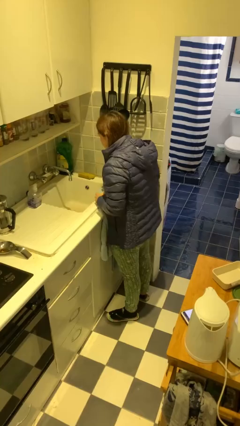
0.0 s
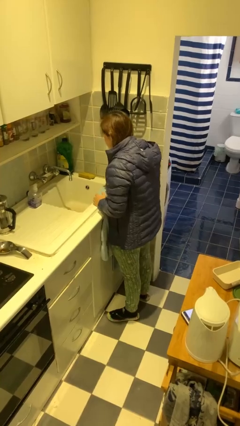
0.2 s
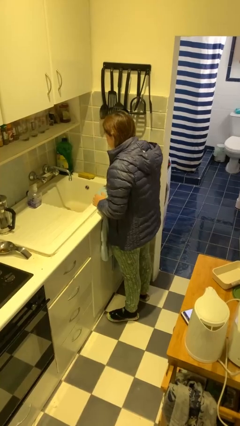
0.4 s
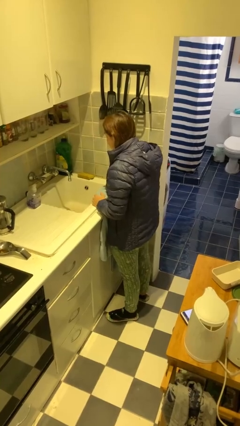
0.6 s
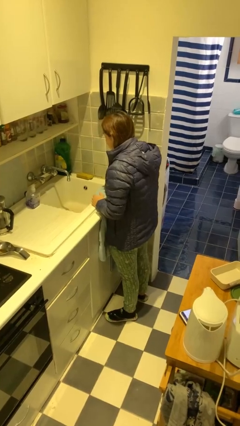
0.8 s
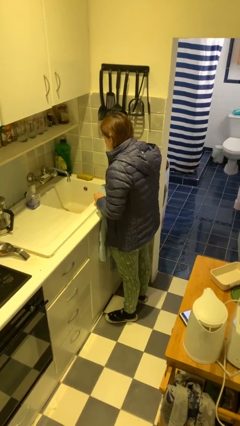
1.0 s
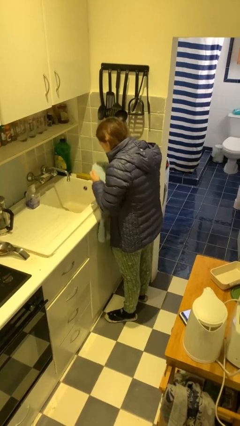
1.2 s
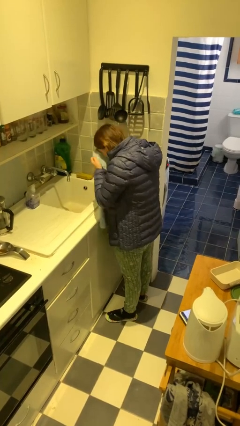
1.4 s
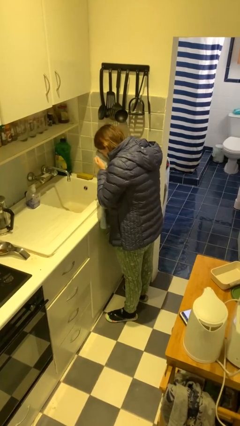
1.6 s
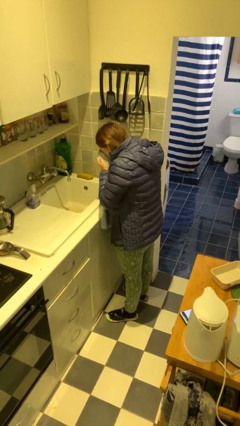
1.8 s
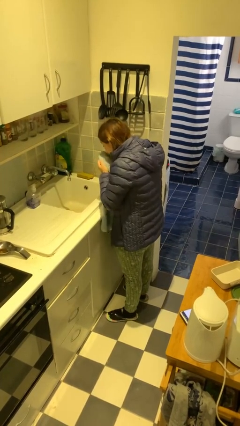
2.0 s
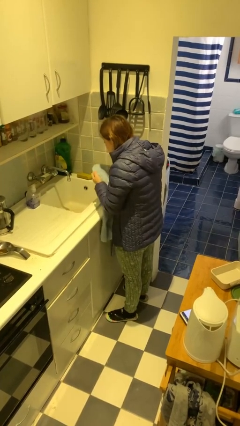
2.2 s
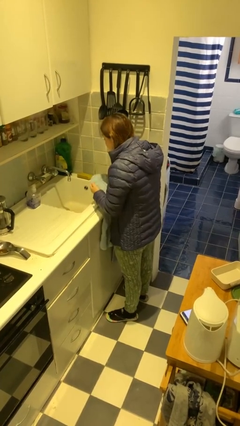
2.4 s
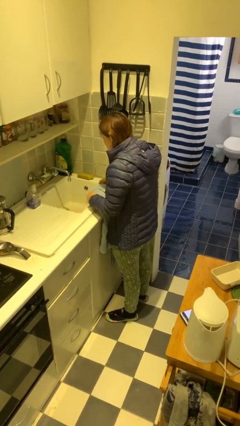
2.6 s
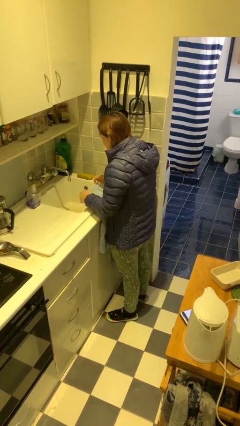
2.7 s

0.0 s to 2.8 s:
person dries face with towel

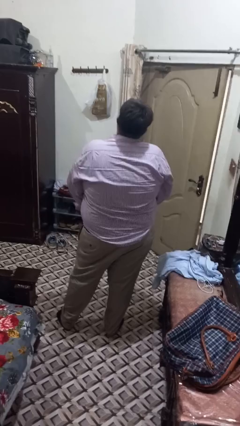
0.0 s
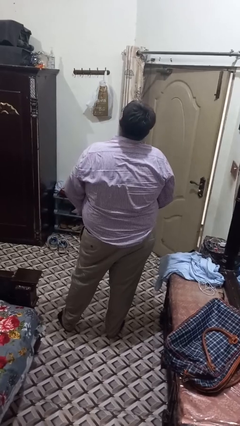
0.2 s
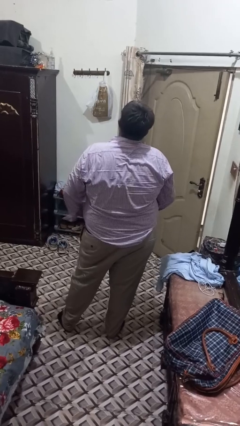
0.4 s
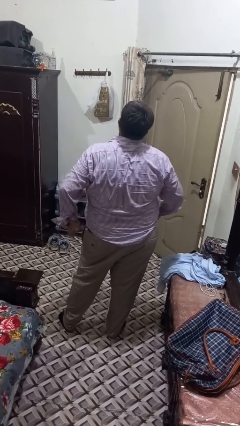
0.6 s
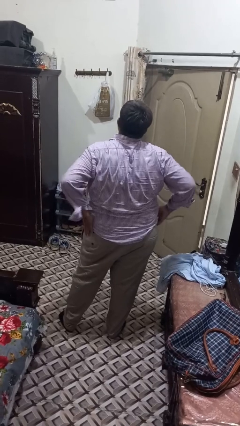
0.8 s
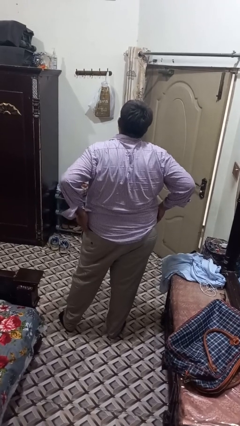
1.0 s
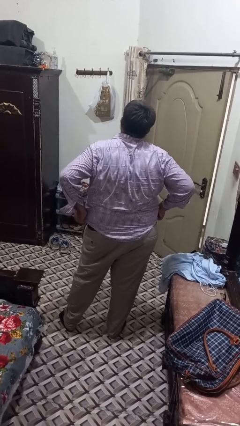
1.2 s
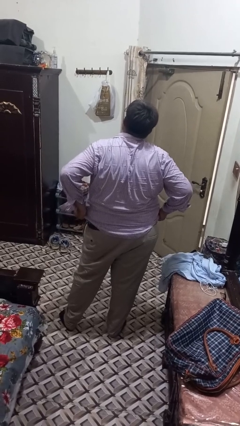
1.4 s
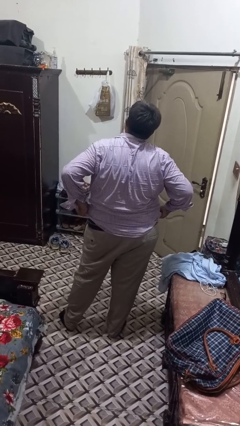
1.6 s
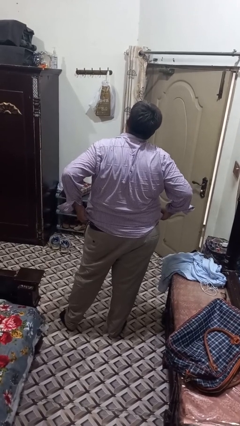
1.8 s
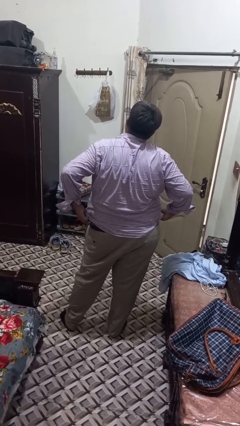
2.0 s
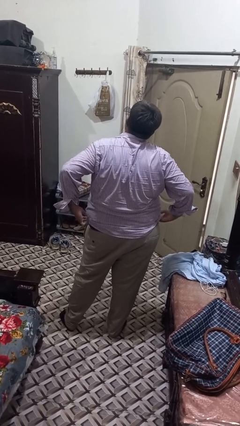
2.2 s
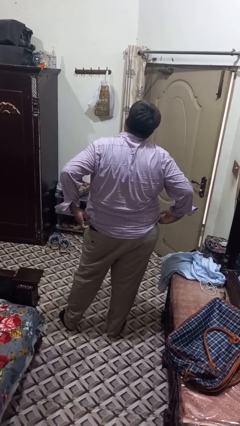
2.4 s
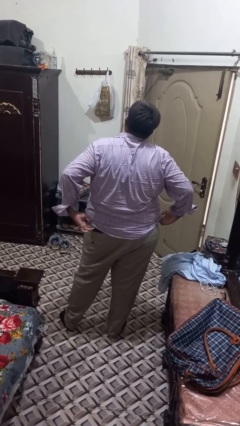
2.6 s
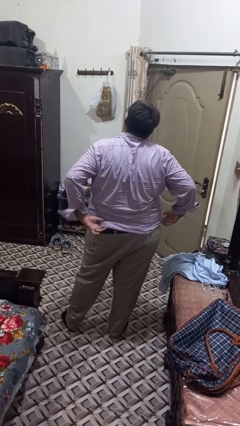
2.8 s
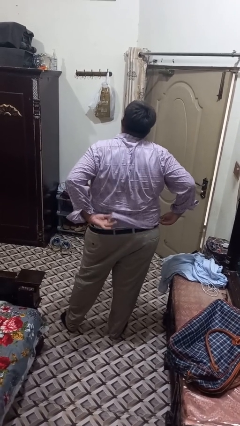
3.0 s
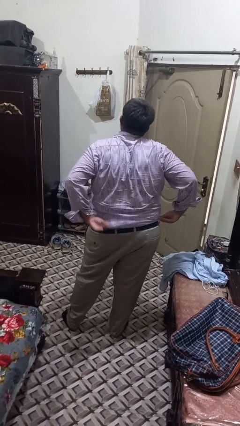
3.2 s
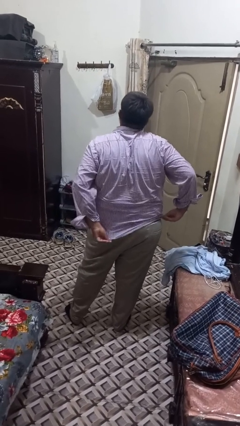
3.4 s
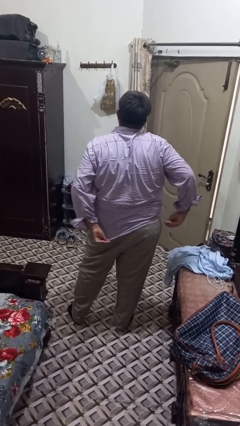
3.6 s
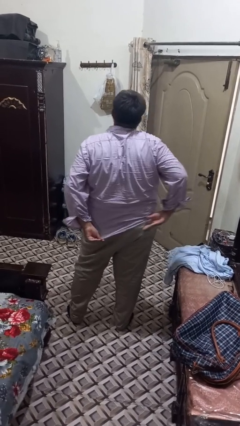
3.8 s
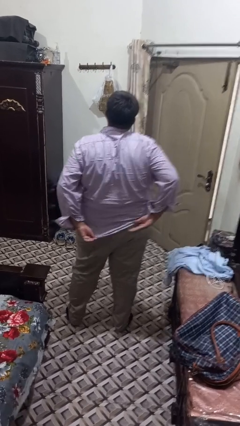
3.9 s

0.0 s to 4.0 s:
person untucks shirt

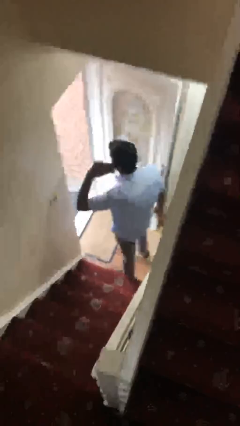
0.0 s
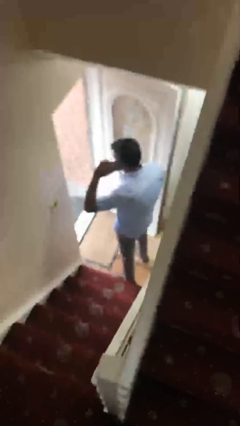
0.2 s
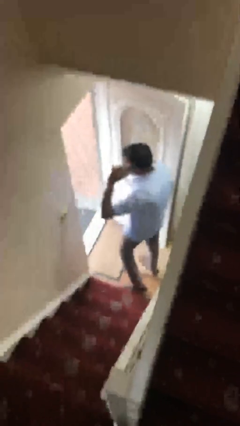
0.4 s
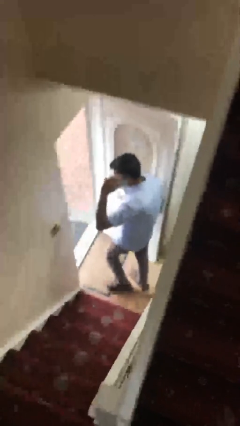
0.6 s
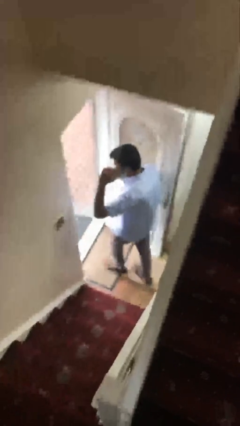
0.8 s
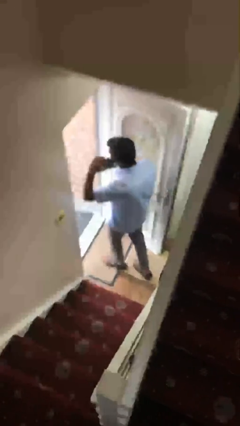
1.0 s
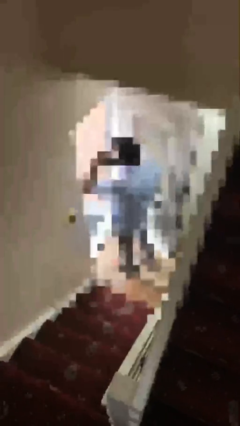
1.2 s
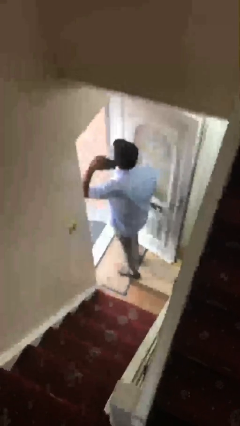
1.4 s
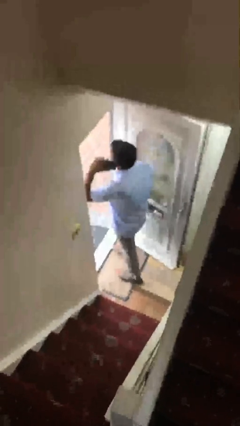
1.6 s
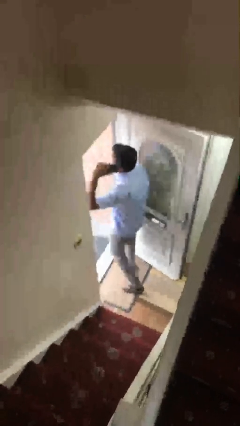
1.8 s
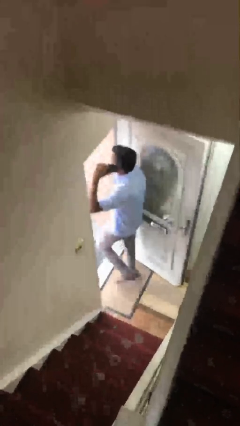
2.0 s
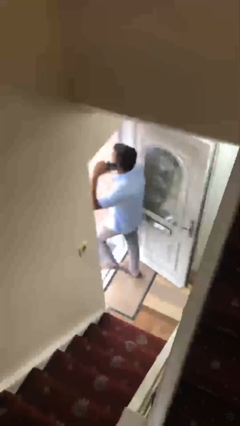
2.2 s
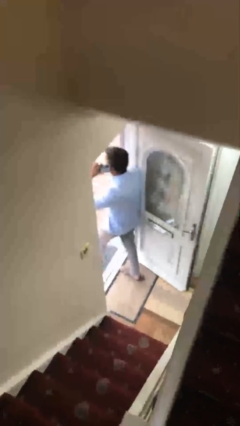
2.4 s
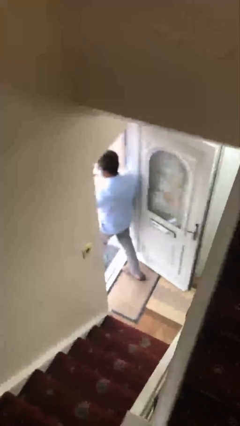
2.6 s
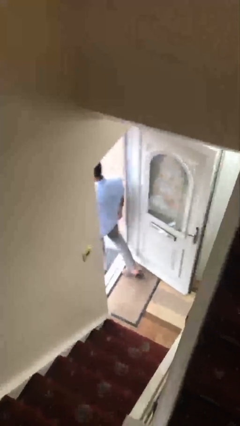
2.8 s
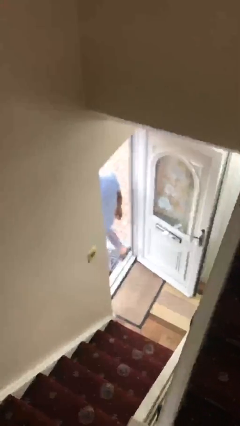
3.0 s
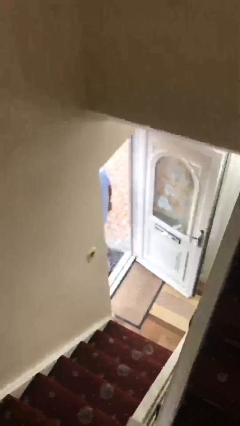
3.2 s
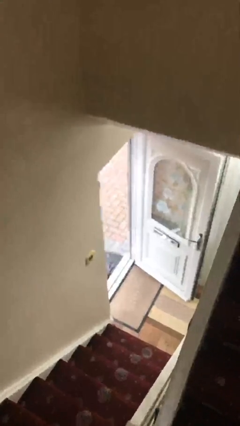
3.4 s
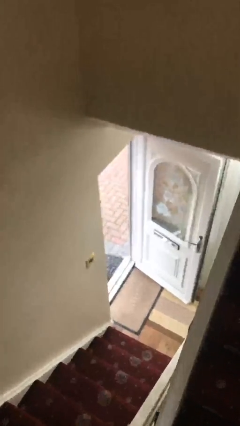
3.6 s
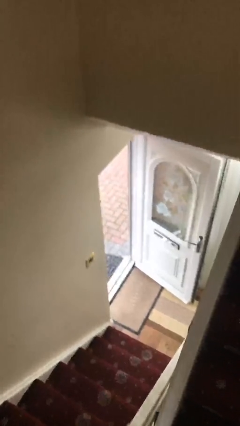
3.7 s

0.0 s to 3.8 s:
person exits scene through structure

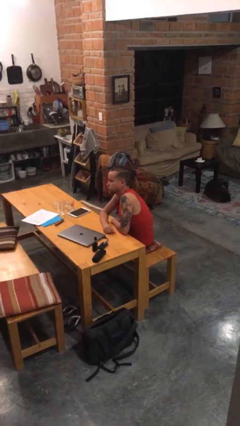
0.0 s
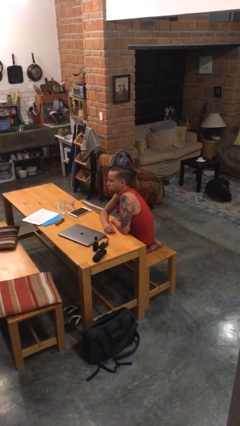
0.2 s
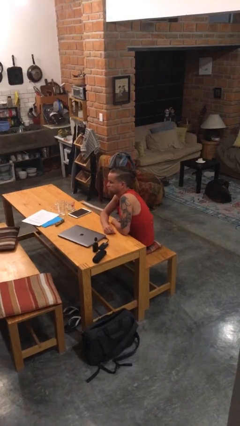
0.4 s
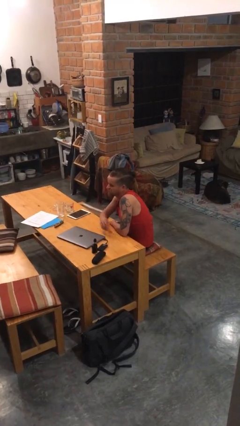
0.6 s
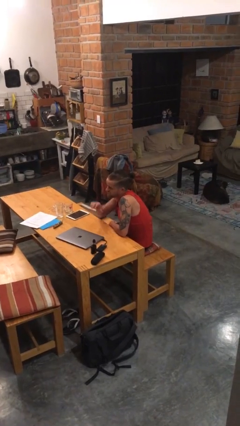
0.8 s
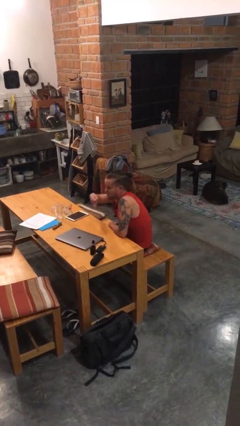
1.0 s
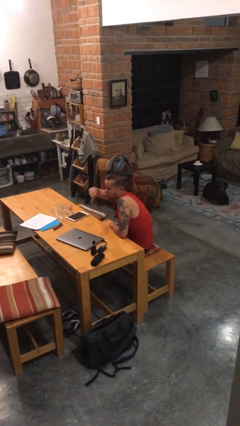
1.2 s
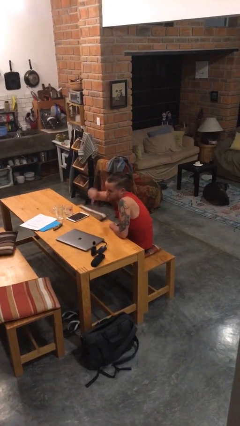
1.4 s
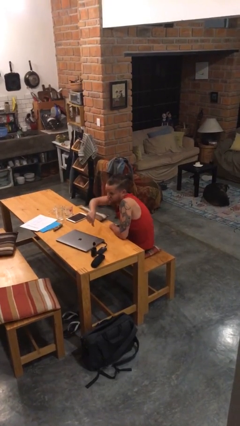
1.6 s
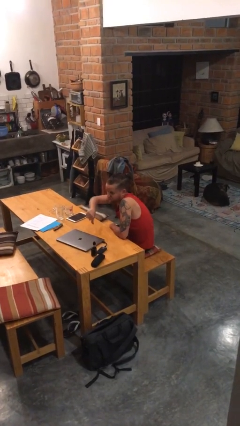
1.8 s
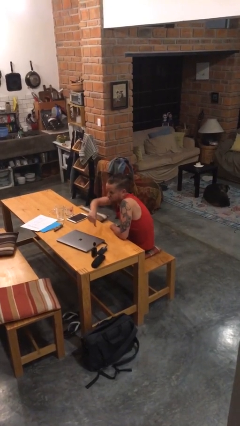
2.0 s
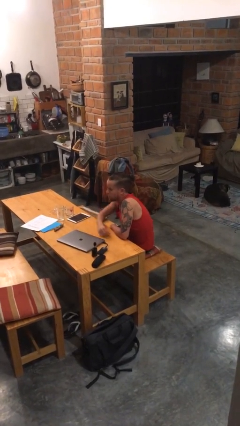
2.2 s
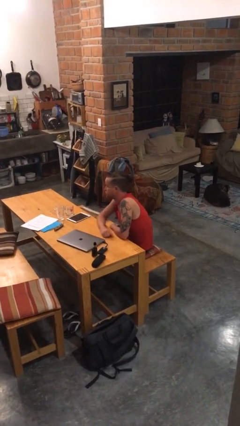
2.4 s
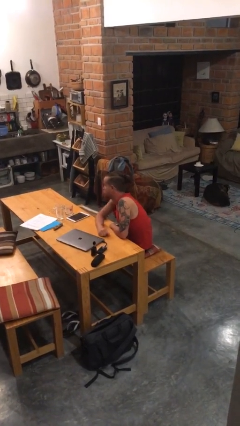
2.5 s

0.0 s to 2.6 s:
person gestures thumbs down

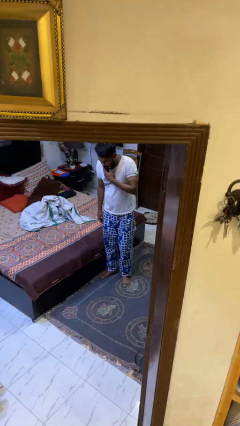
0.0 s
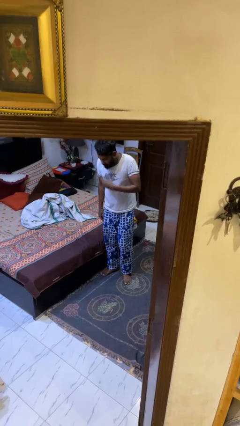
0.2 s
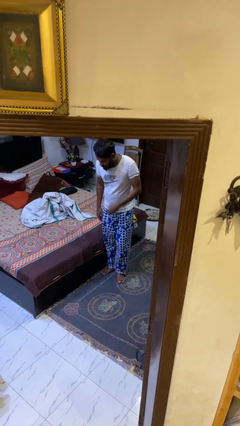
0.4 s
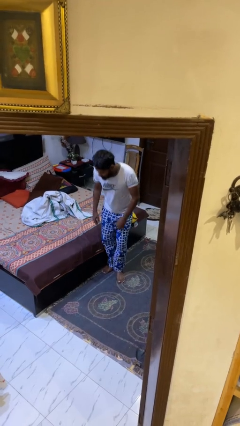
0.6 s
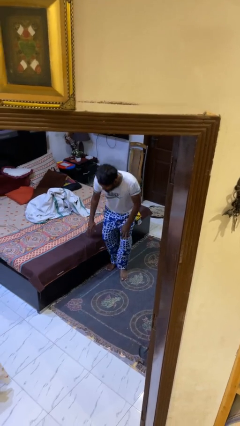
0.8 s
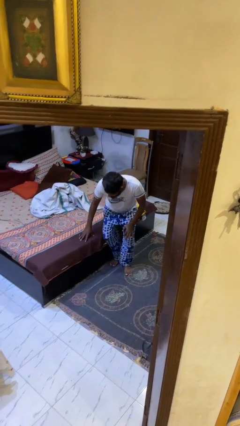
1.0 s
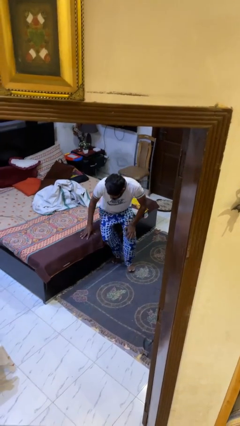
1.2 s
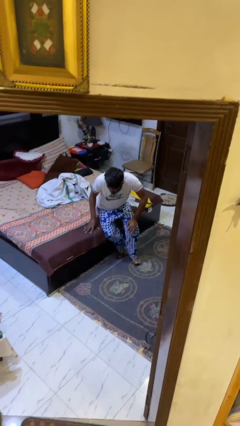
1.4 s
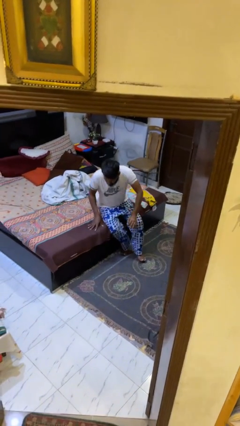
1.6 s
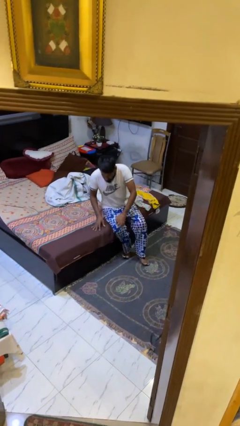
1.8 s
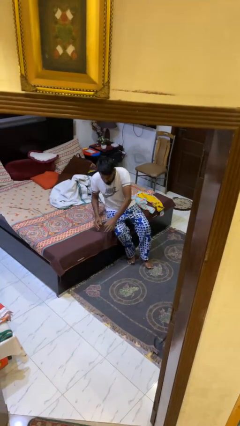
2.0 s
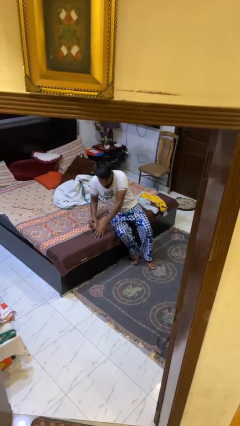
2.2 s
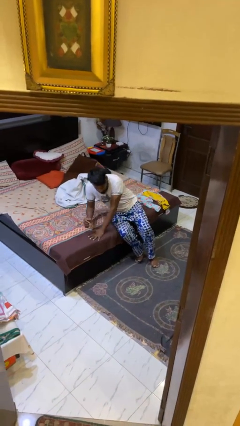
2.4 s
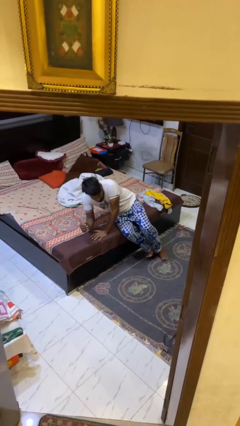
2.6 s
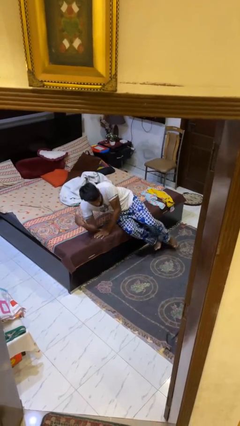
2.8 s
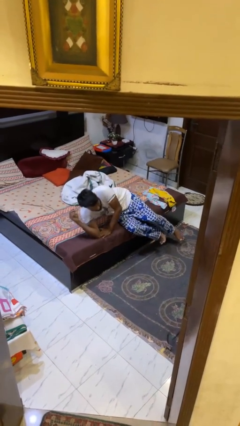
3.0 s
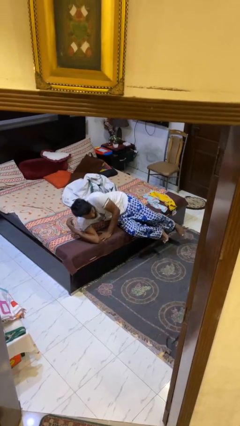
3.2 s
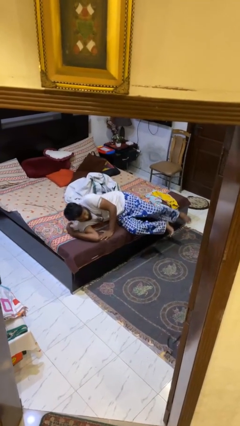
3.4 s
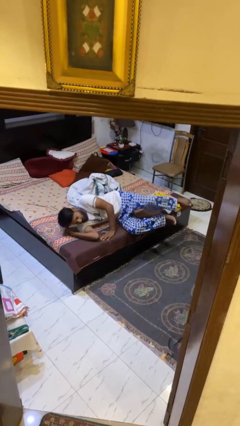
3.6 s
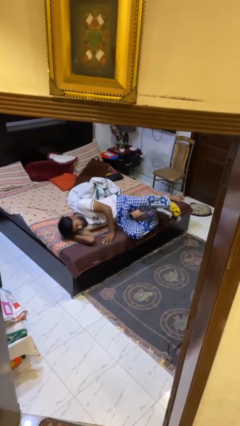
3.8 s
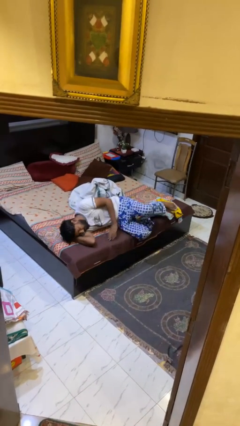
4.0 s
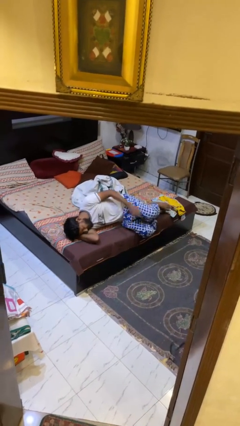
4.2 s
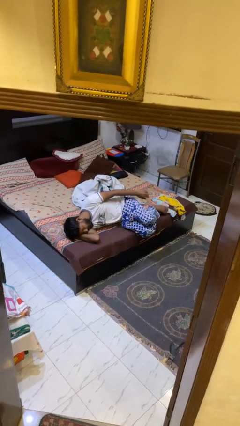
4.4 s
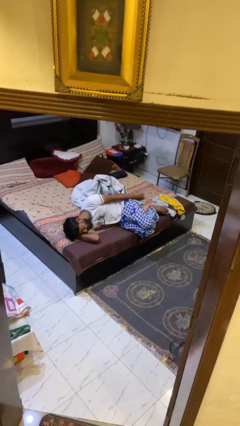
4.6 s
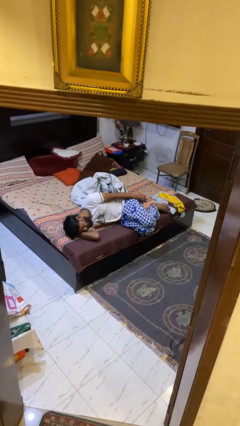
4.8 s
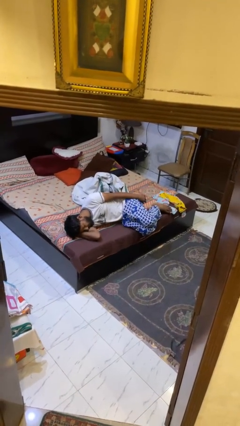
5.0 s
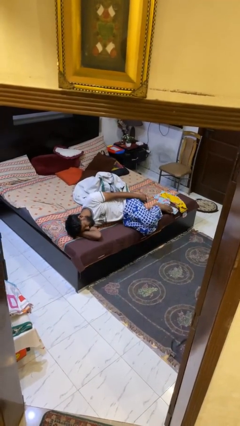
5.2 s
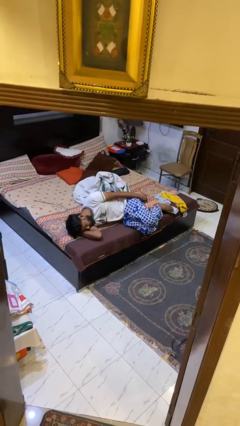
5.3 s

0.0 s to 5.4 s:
person lies down on bed
